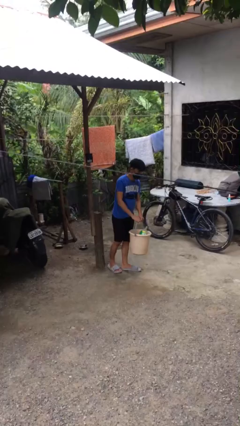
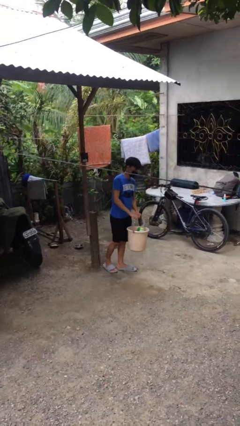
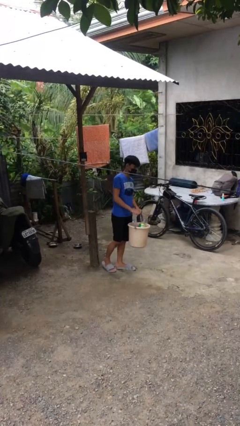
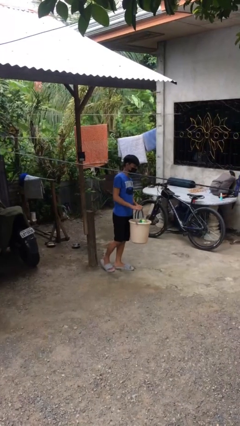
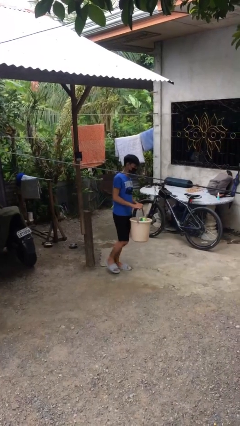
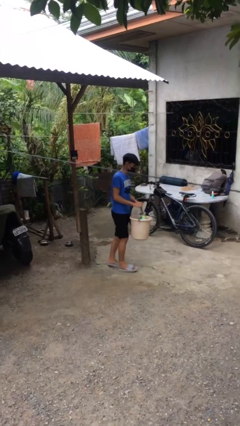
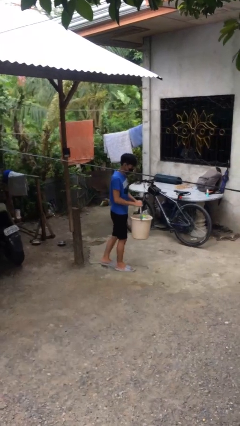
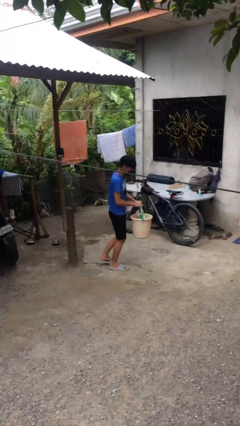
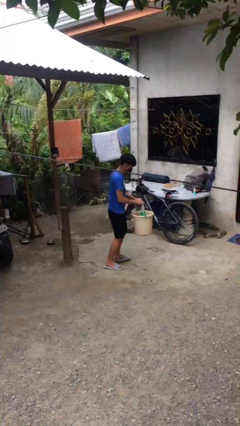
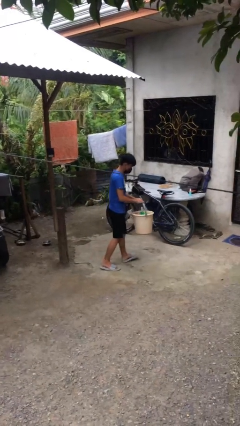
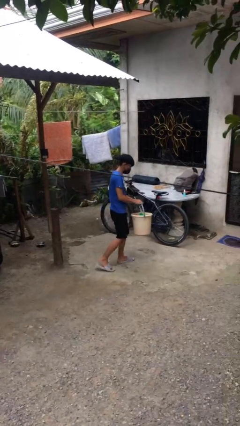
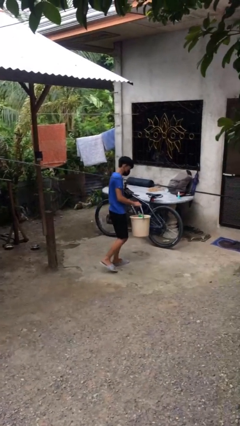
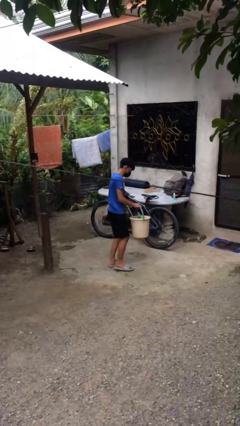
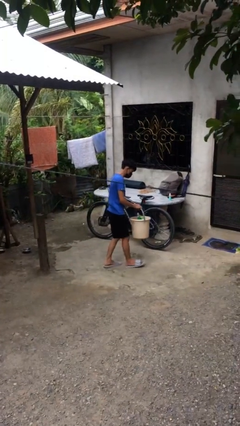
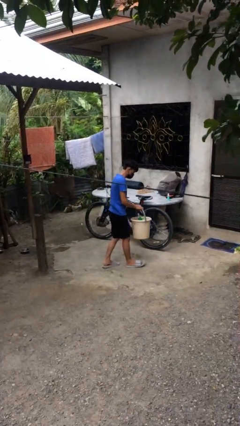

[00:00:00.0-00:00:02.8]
person carries heavy object

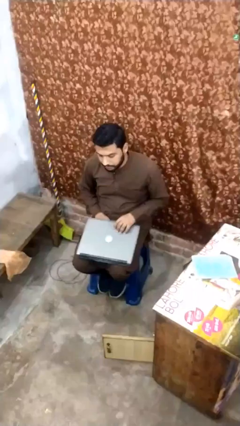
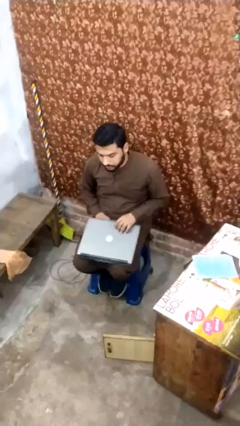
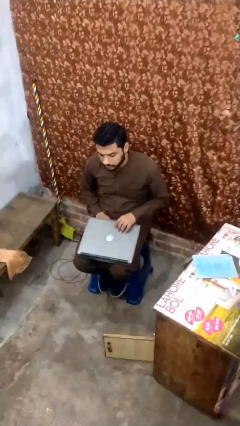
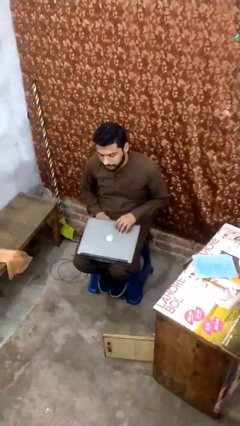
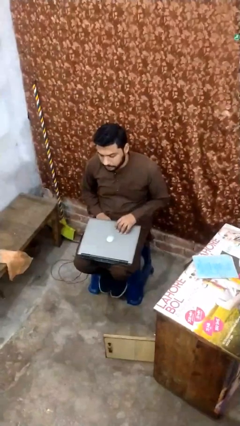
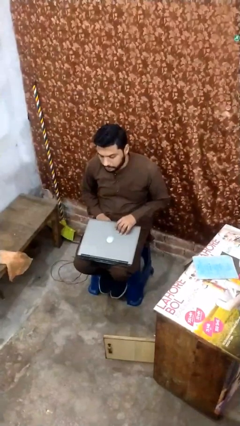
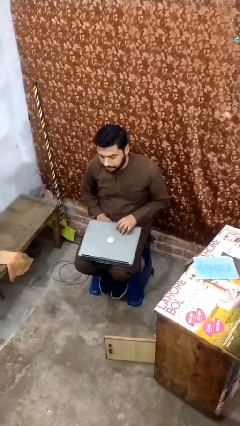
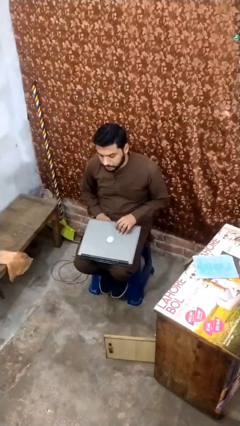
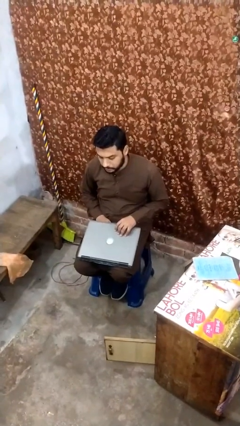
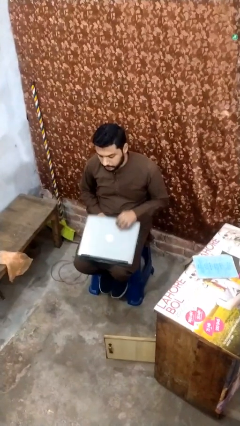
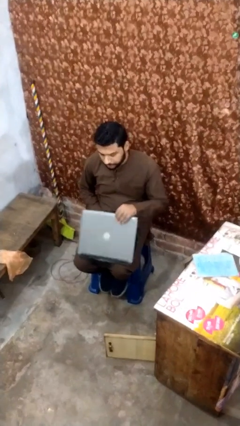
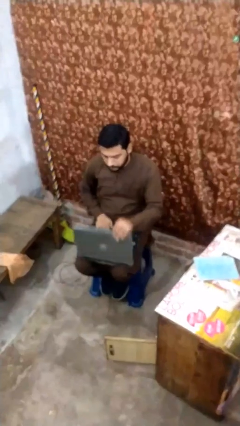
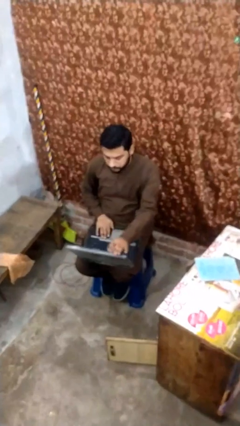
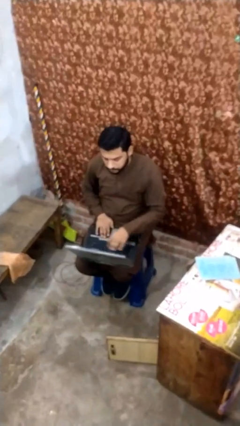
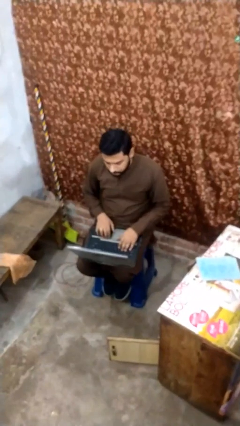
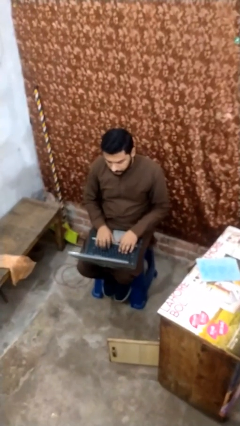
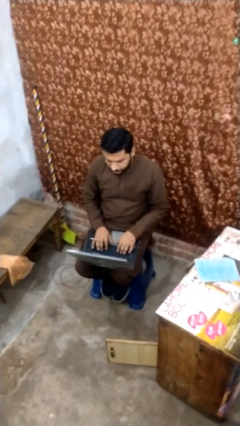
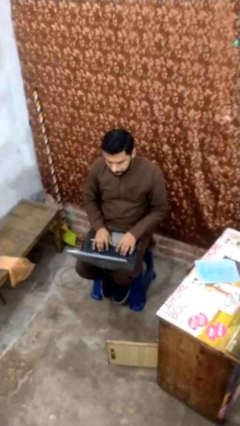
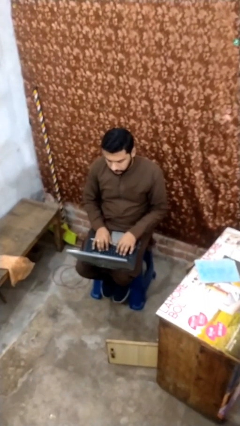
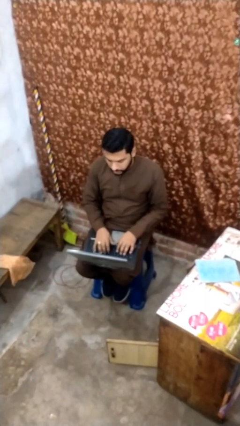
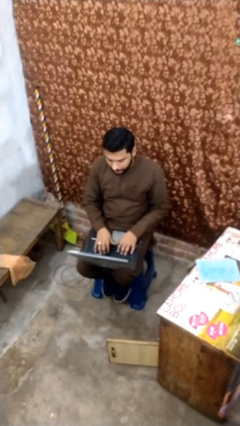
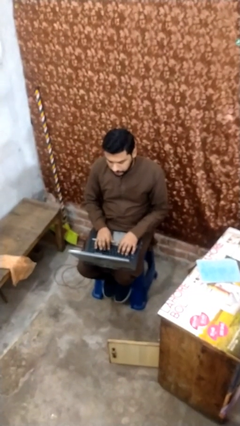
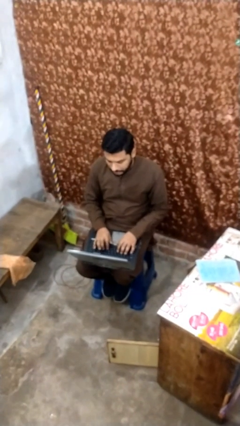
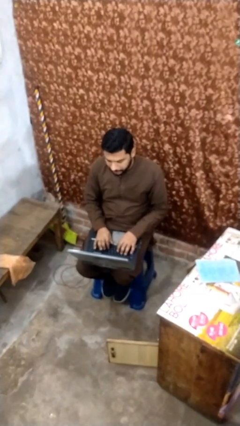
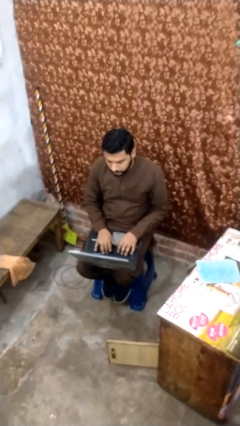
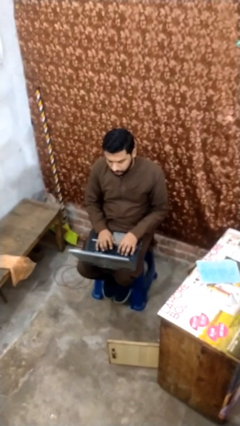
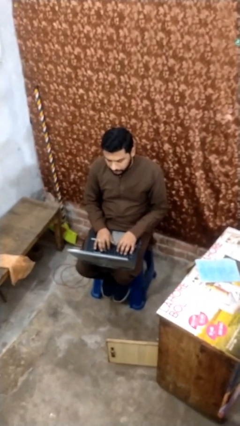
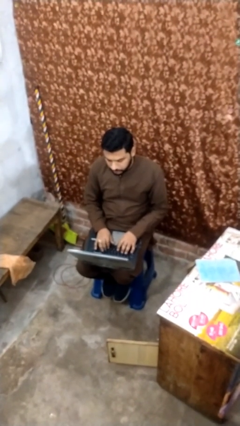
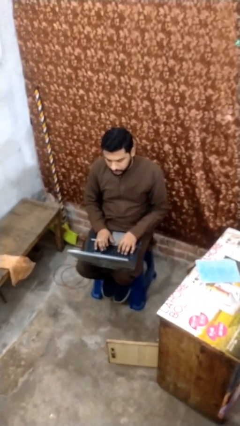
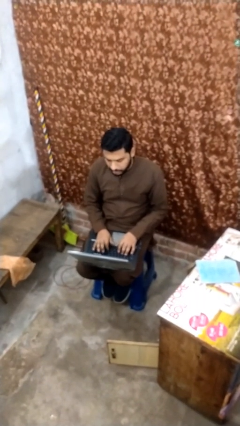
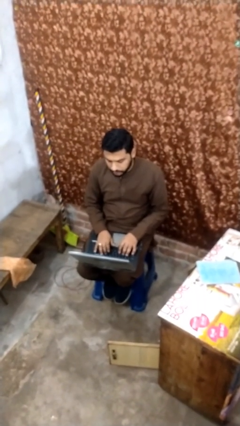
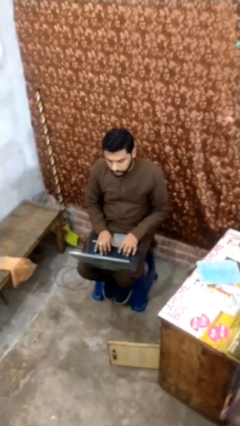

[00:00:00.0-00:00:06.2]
person interacts with laptop

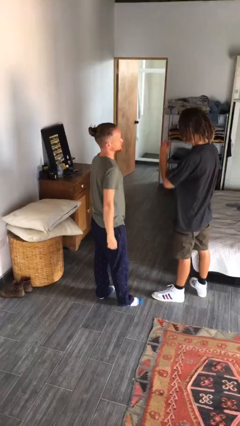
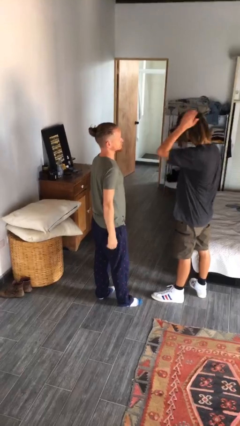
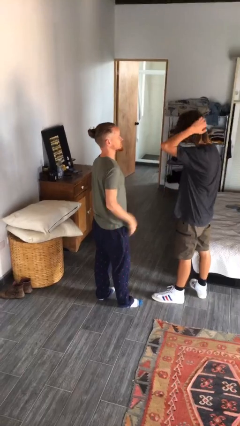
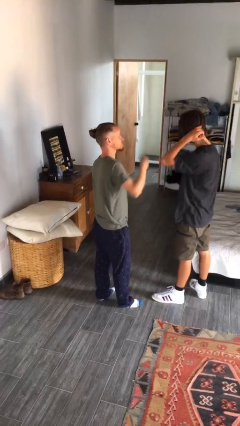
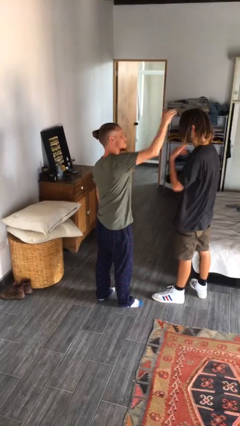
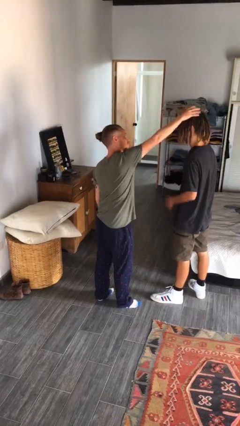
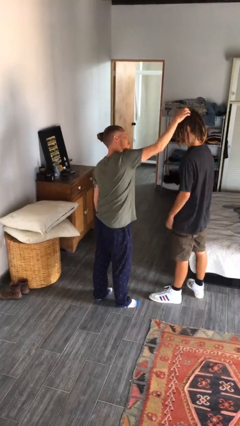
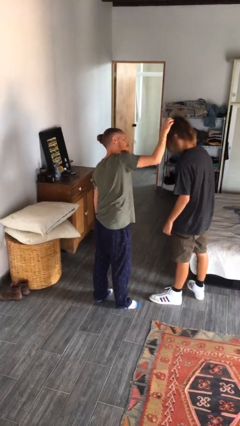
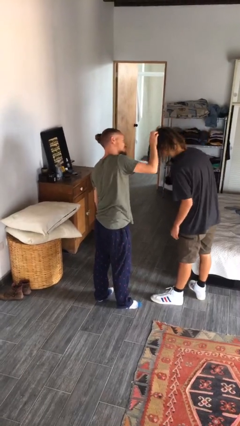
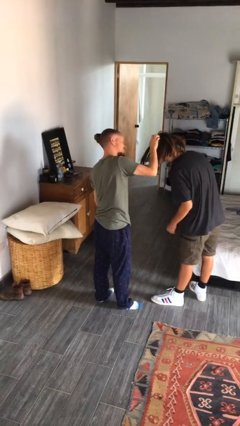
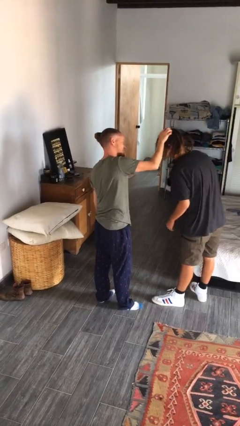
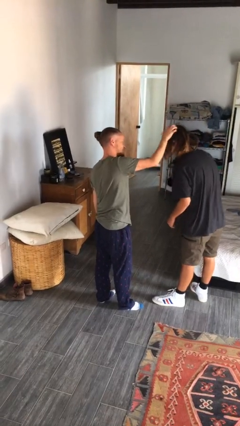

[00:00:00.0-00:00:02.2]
person grabs person by hair

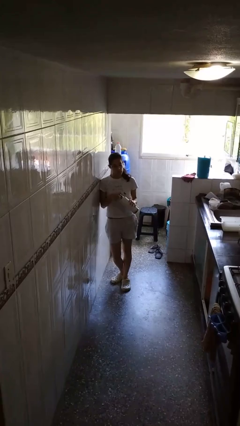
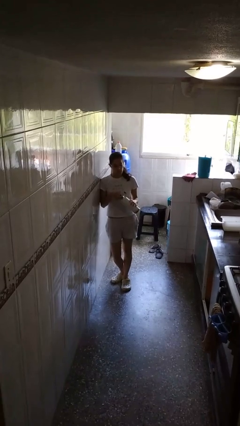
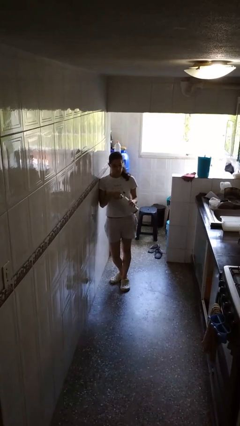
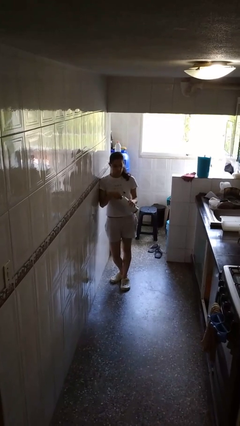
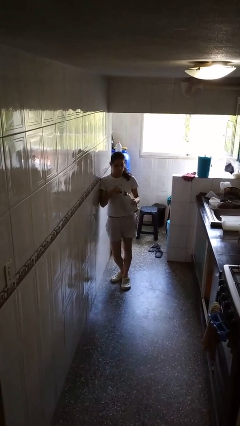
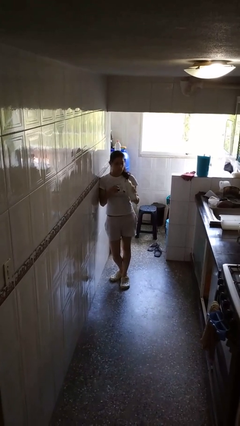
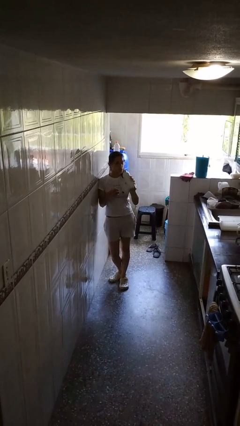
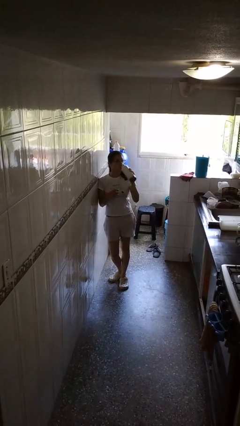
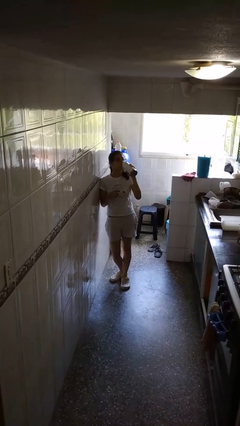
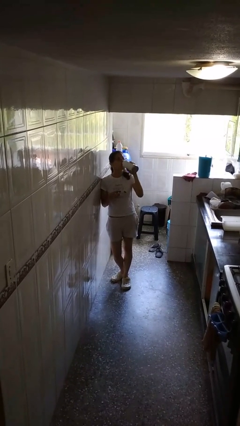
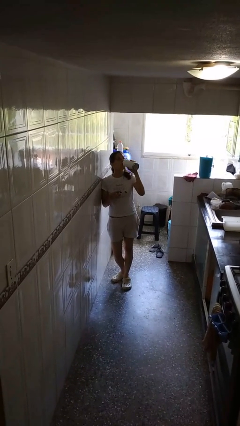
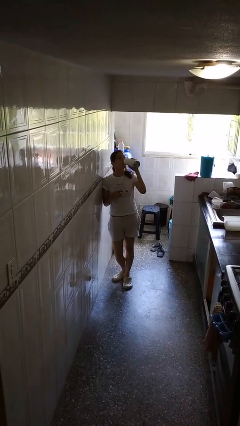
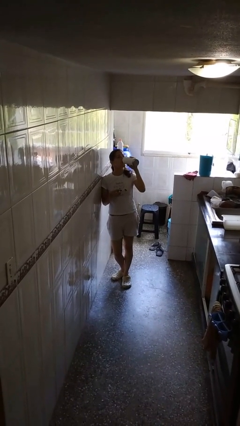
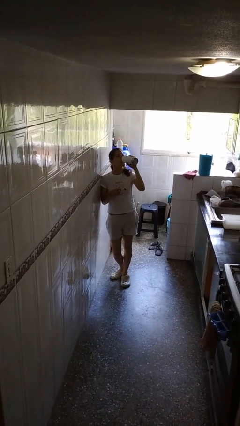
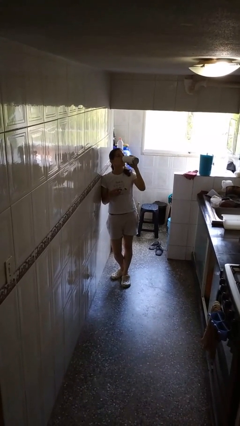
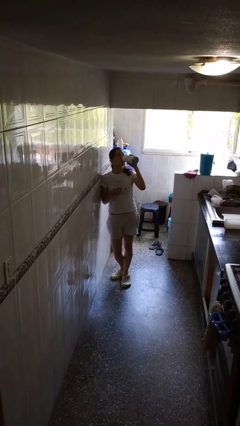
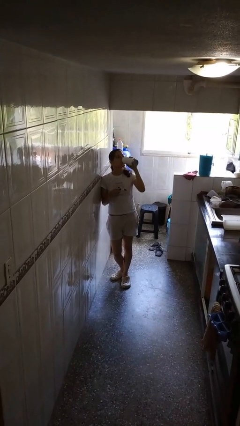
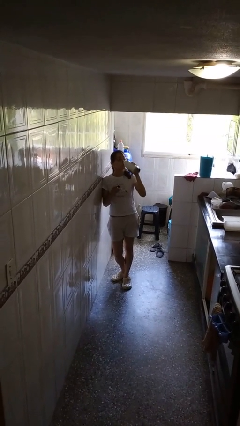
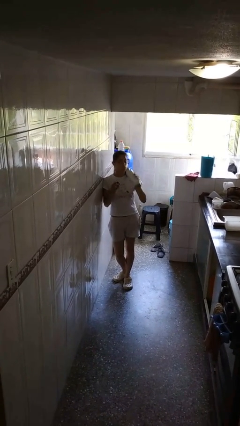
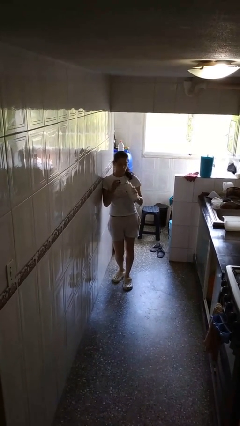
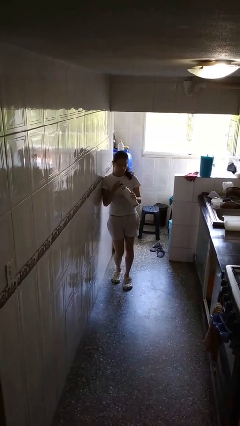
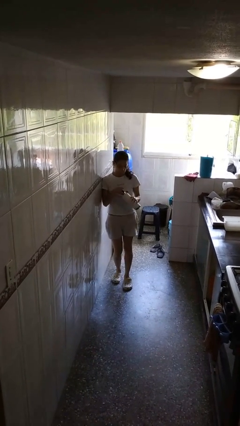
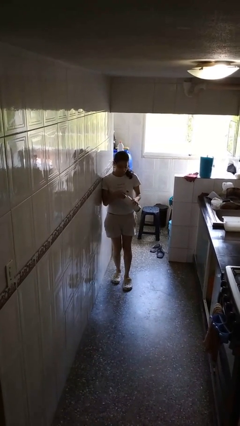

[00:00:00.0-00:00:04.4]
person drinks from bottle

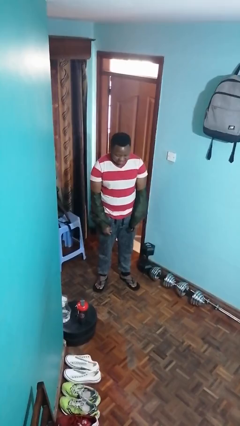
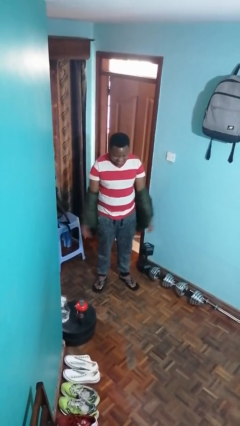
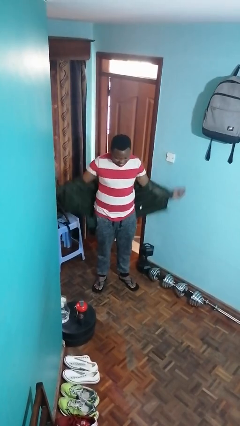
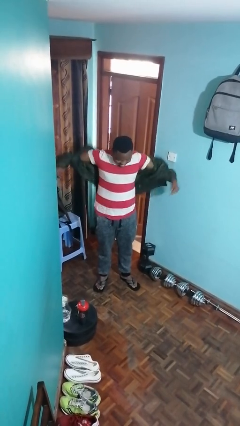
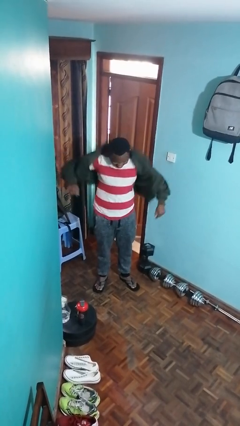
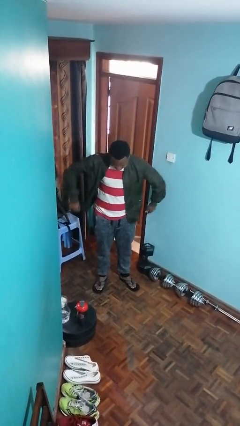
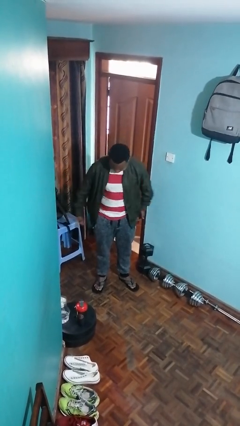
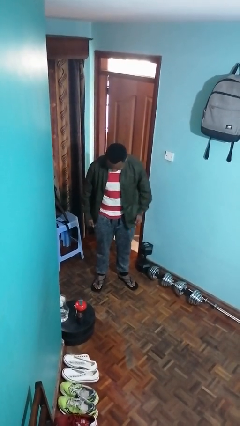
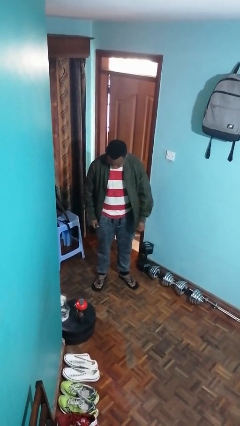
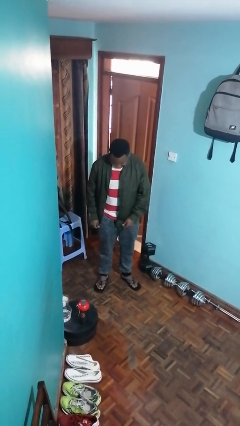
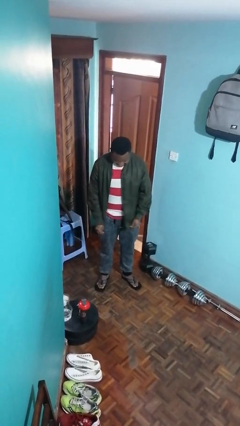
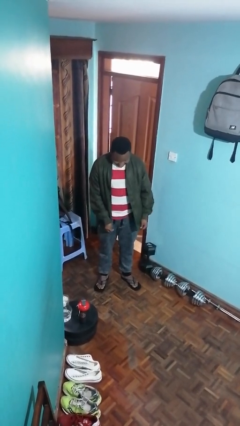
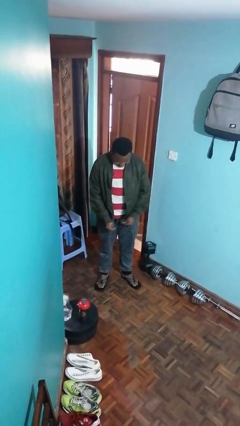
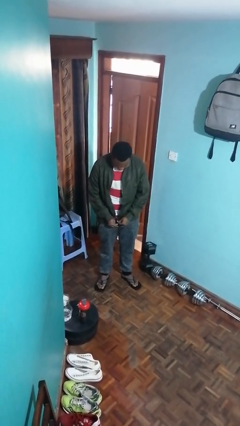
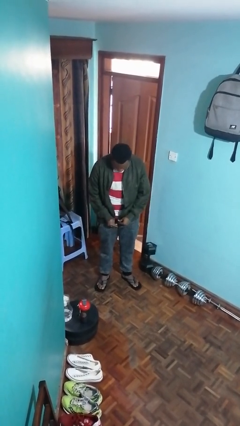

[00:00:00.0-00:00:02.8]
person puts on jacket
